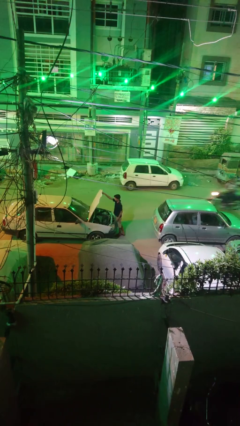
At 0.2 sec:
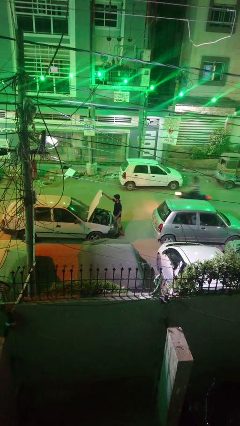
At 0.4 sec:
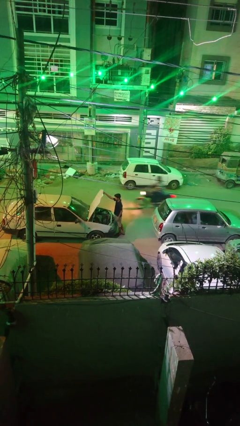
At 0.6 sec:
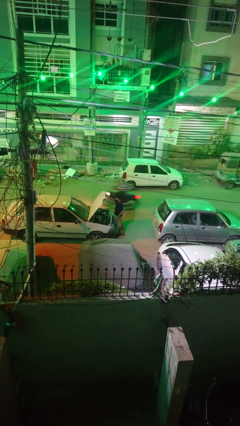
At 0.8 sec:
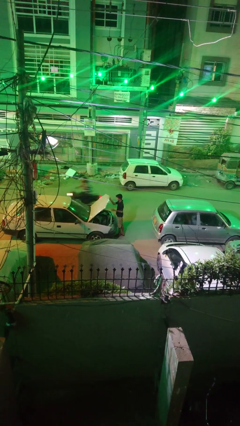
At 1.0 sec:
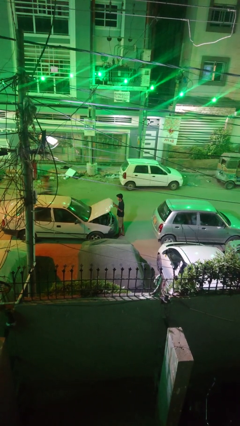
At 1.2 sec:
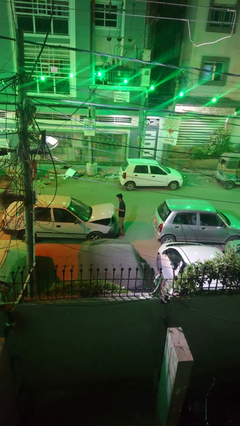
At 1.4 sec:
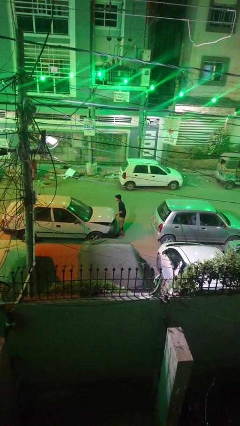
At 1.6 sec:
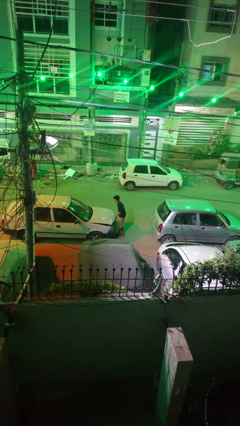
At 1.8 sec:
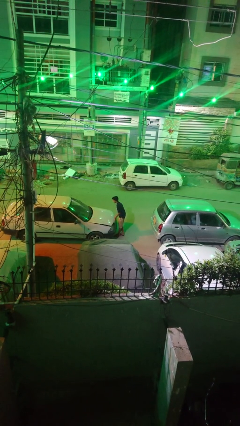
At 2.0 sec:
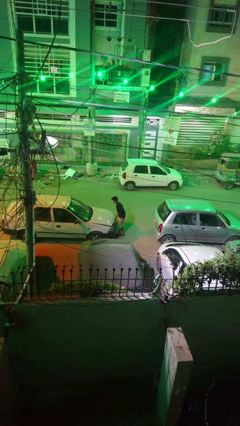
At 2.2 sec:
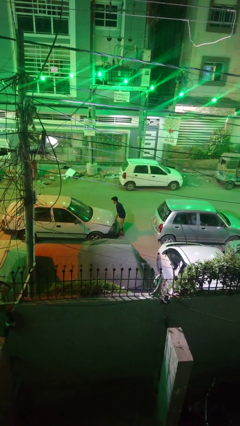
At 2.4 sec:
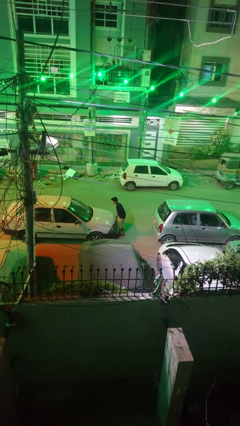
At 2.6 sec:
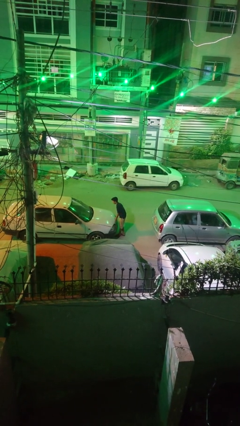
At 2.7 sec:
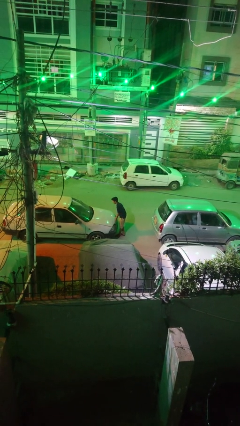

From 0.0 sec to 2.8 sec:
person closes car hood

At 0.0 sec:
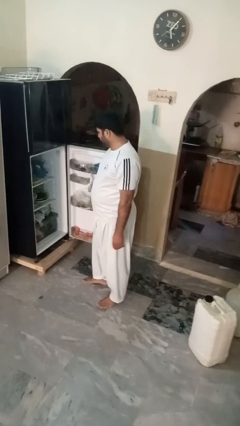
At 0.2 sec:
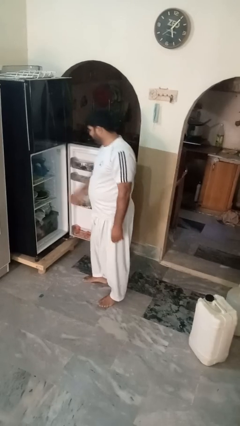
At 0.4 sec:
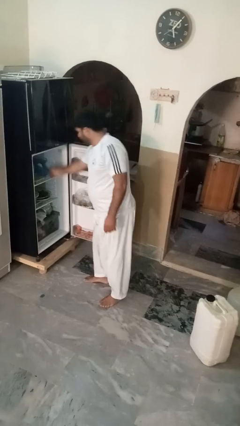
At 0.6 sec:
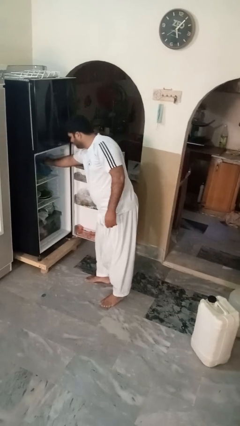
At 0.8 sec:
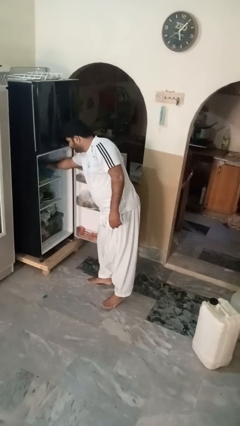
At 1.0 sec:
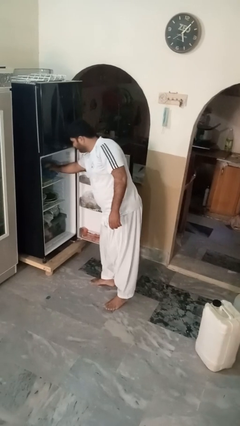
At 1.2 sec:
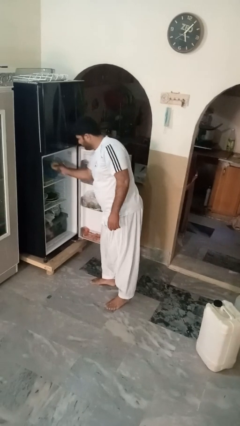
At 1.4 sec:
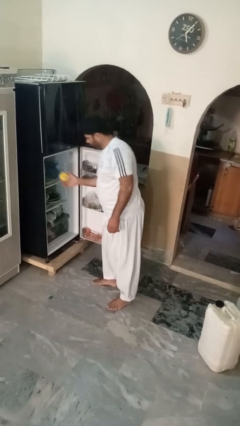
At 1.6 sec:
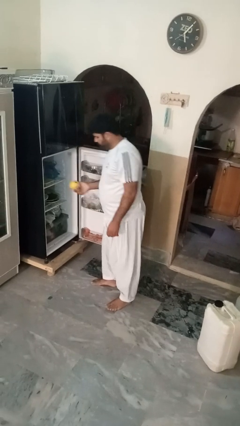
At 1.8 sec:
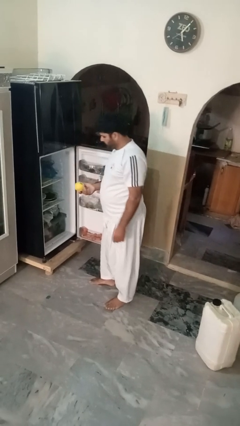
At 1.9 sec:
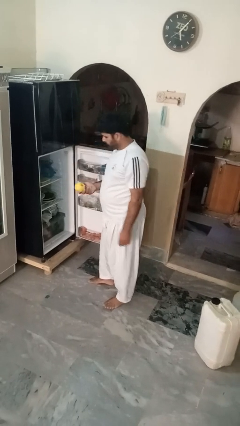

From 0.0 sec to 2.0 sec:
person takes object from refrigerator

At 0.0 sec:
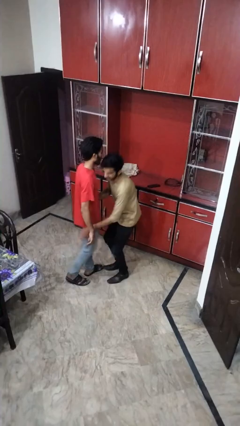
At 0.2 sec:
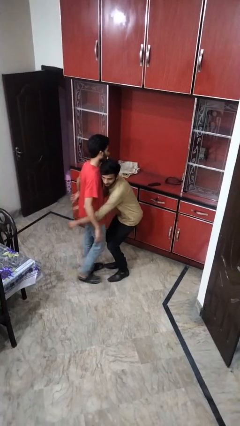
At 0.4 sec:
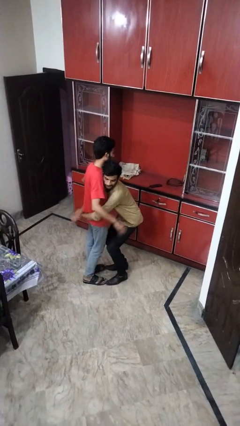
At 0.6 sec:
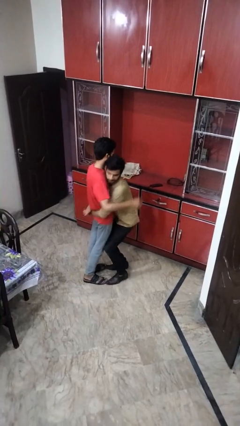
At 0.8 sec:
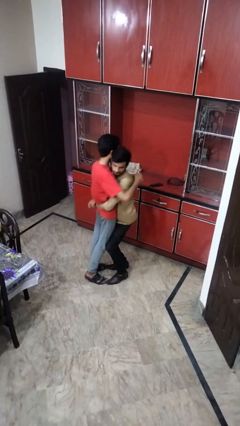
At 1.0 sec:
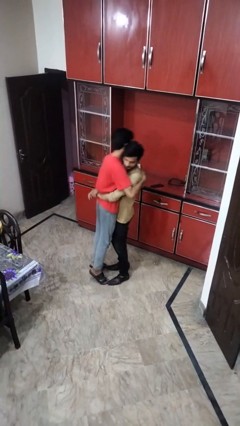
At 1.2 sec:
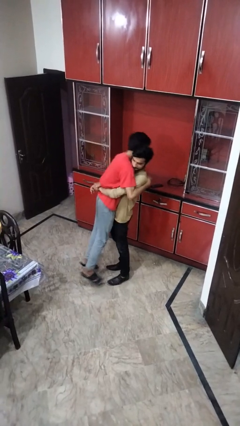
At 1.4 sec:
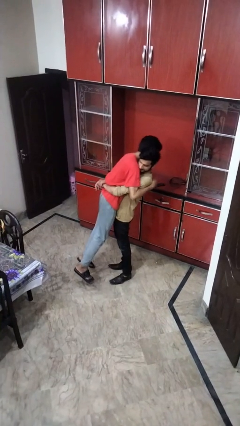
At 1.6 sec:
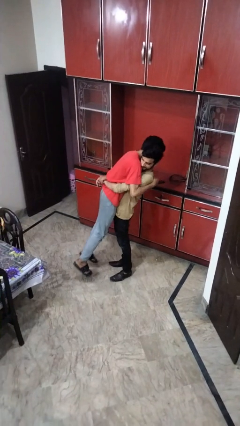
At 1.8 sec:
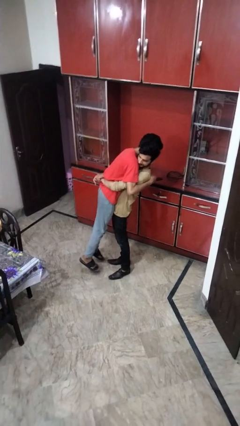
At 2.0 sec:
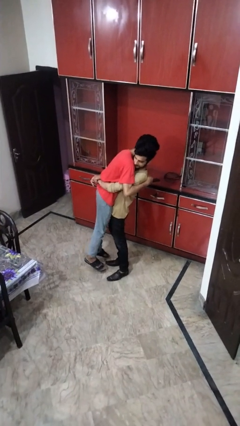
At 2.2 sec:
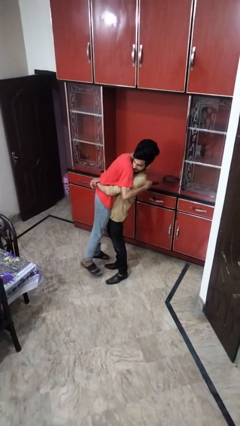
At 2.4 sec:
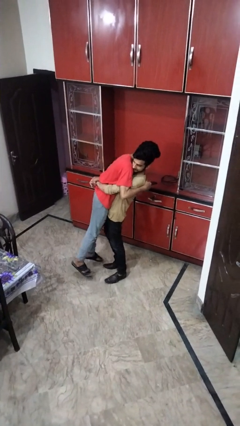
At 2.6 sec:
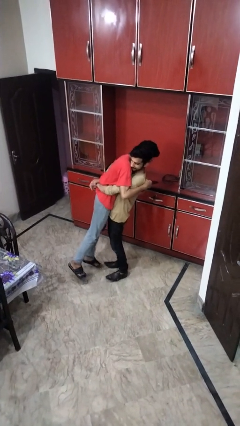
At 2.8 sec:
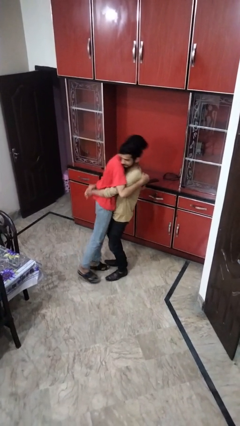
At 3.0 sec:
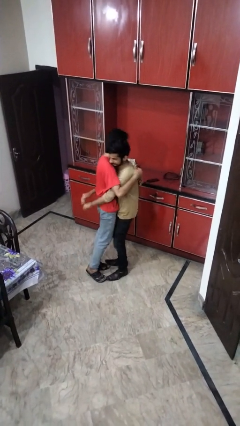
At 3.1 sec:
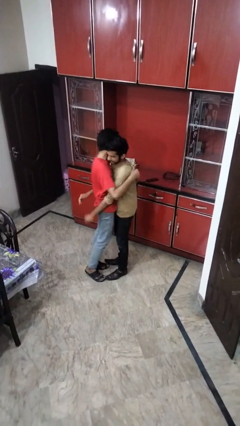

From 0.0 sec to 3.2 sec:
person picks up person

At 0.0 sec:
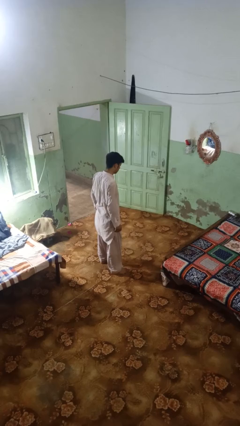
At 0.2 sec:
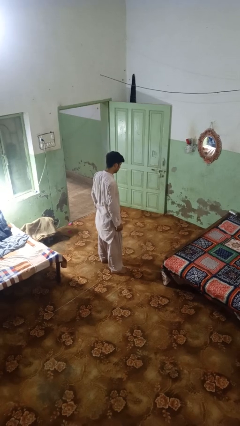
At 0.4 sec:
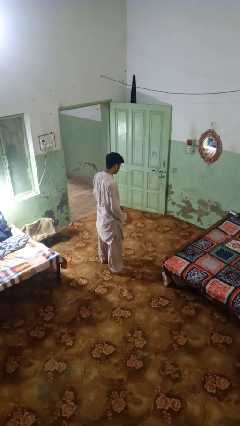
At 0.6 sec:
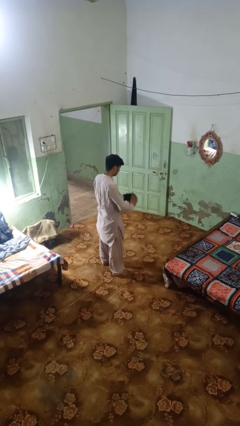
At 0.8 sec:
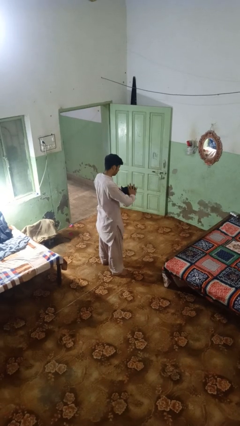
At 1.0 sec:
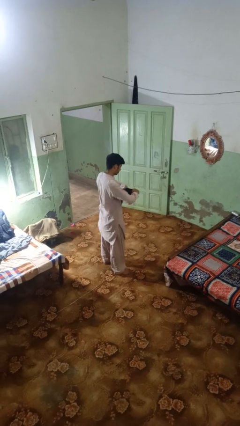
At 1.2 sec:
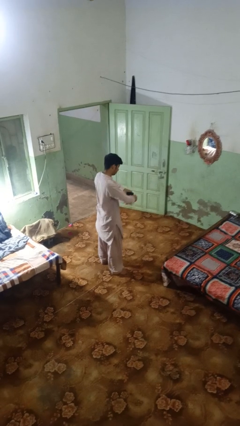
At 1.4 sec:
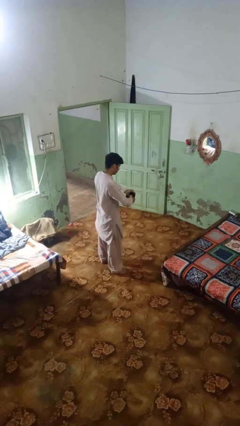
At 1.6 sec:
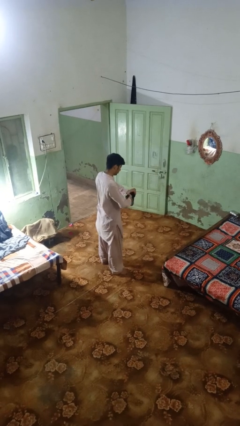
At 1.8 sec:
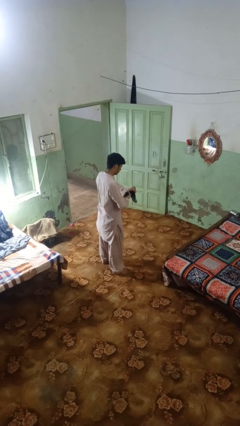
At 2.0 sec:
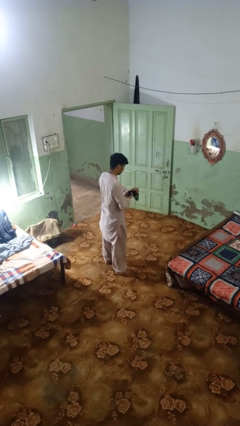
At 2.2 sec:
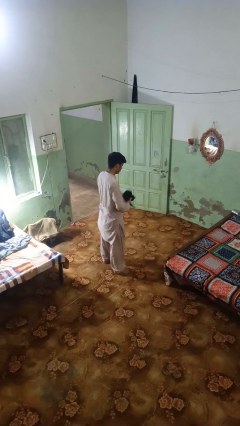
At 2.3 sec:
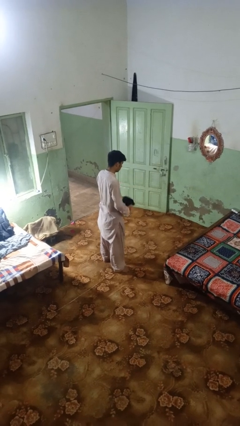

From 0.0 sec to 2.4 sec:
person squeezes object

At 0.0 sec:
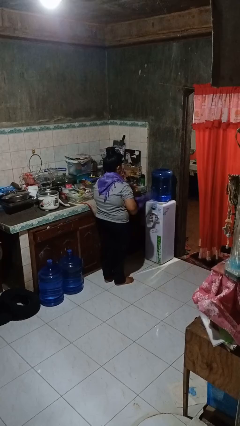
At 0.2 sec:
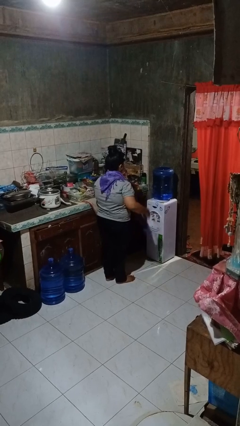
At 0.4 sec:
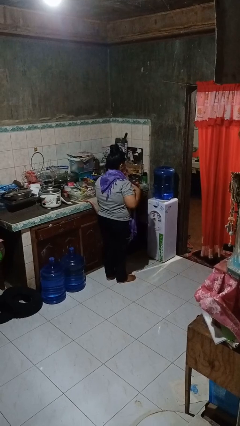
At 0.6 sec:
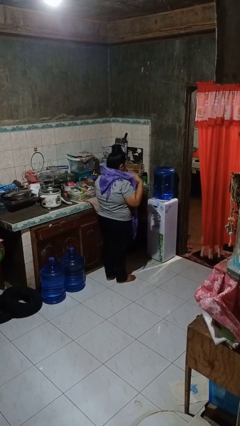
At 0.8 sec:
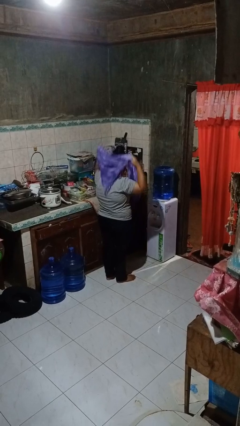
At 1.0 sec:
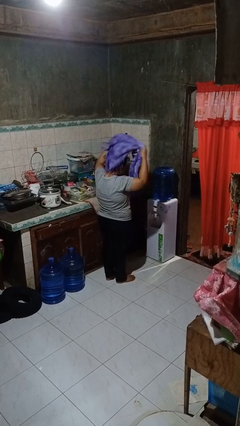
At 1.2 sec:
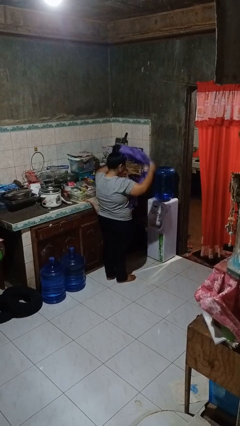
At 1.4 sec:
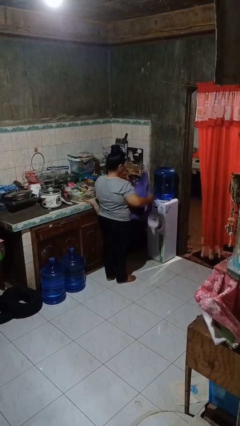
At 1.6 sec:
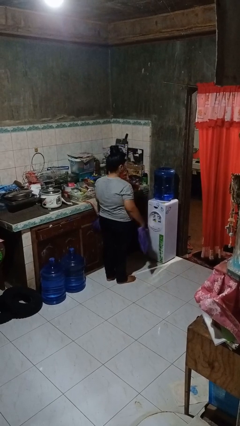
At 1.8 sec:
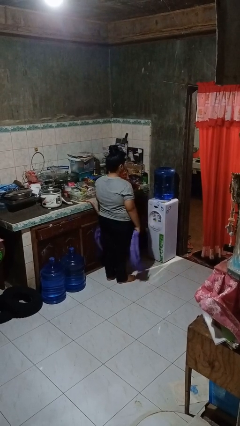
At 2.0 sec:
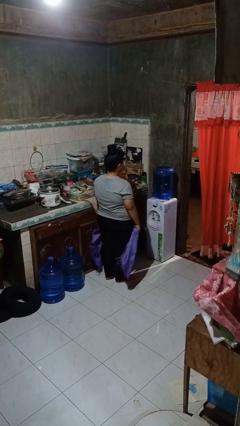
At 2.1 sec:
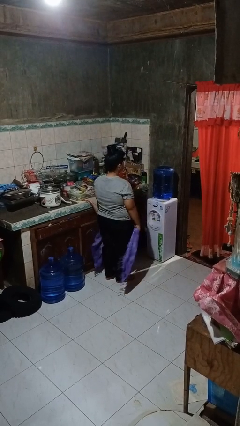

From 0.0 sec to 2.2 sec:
person takes off scarf

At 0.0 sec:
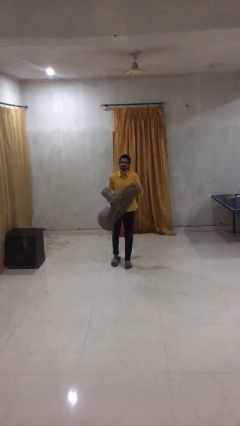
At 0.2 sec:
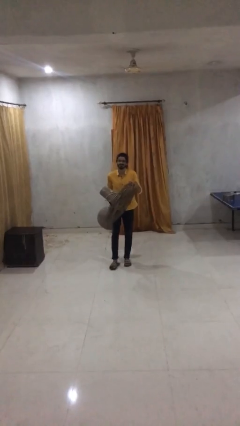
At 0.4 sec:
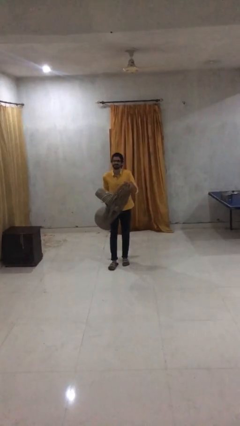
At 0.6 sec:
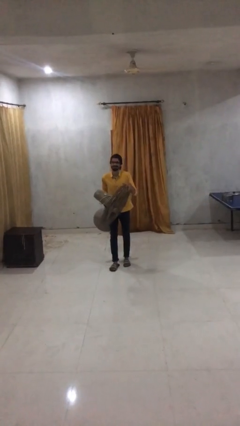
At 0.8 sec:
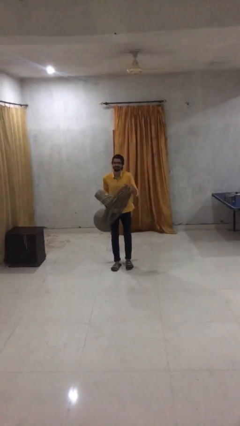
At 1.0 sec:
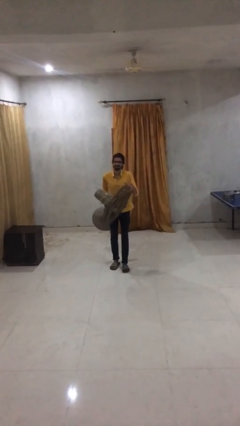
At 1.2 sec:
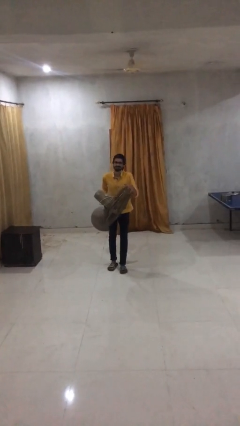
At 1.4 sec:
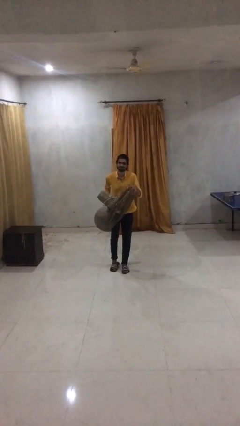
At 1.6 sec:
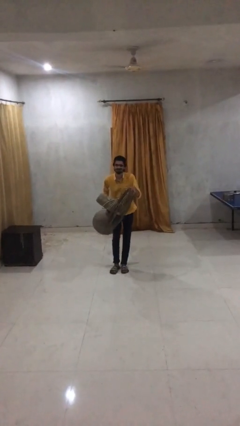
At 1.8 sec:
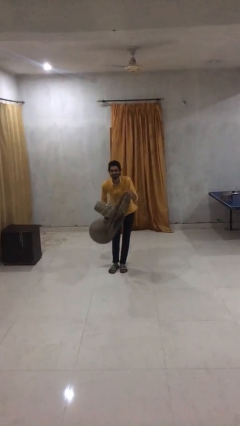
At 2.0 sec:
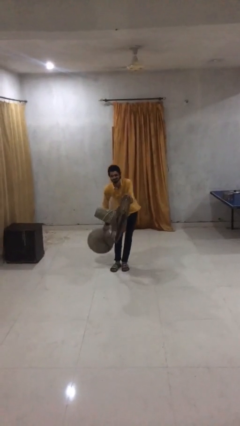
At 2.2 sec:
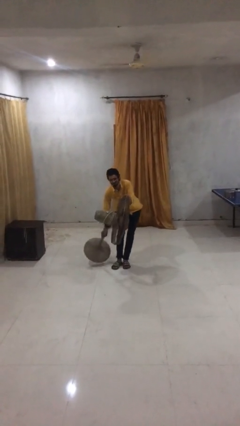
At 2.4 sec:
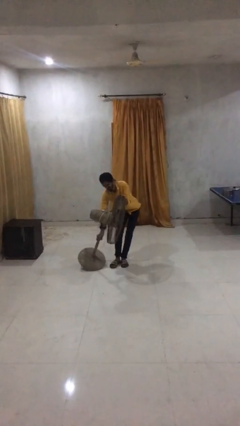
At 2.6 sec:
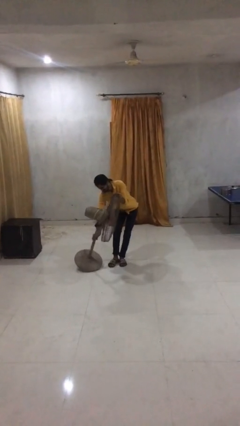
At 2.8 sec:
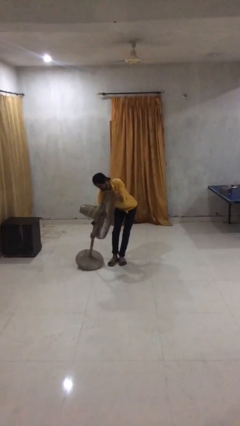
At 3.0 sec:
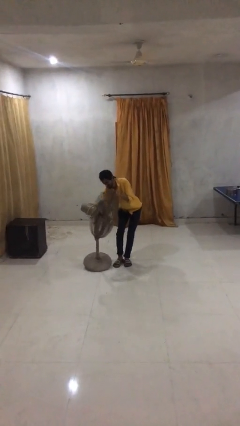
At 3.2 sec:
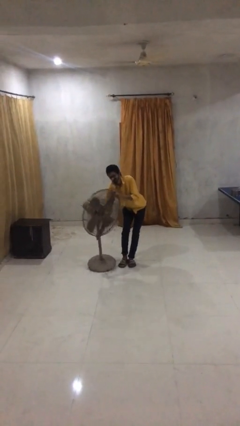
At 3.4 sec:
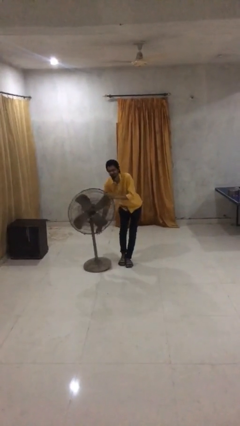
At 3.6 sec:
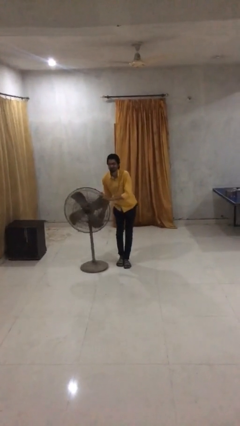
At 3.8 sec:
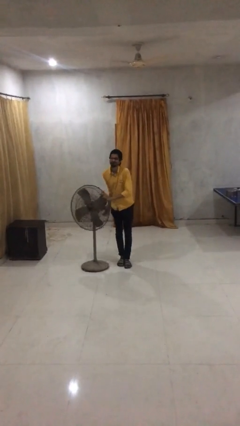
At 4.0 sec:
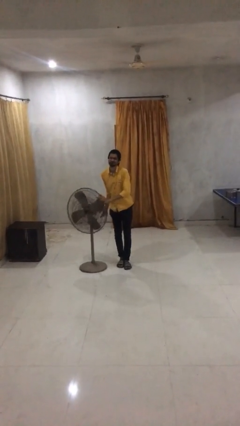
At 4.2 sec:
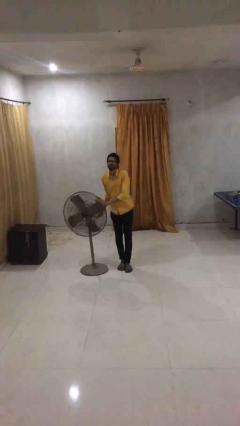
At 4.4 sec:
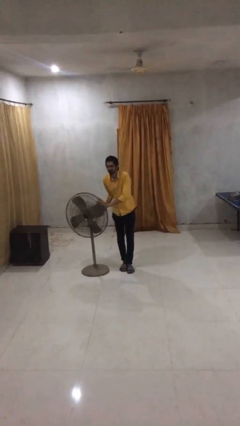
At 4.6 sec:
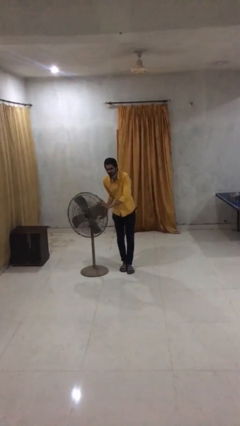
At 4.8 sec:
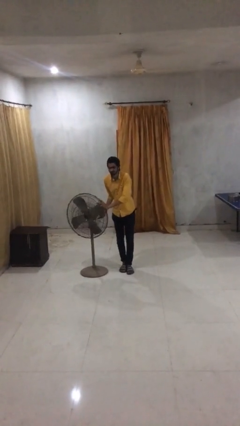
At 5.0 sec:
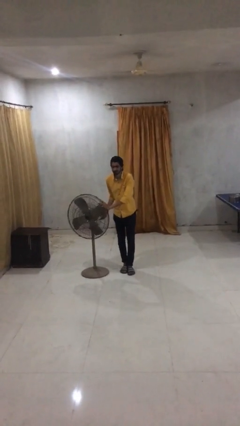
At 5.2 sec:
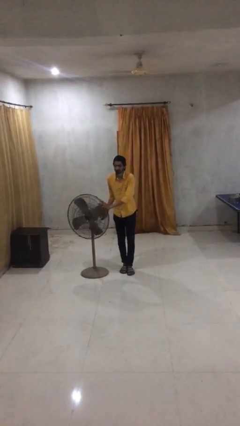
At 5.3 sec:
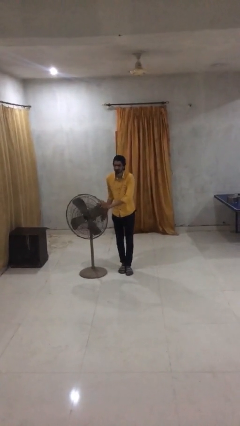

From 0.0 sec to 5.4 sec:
person puts down object on floor
